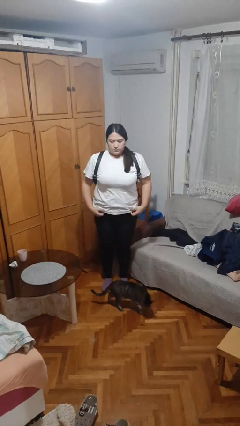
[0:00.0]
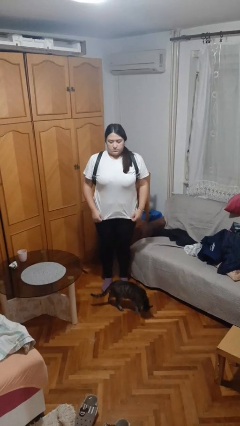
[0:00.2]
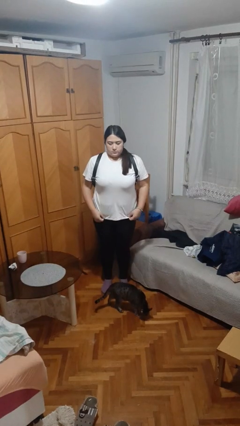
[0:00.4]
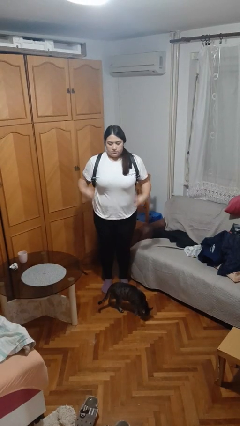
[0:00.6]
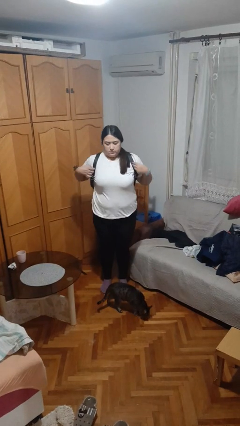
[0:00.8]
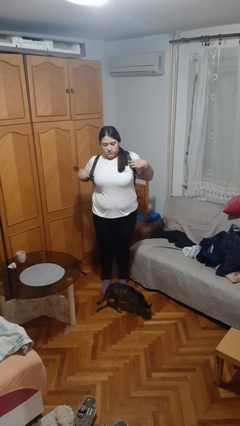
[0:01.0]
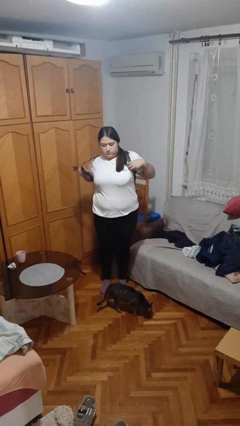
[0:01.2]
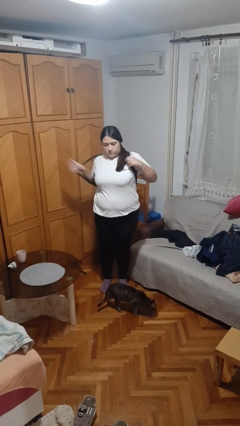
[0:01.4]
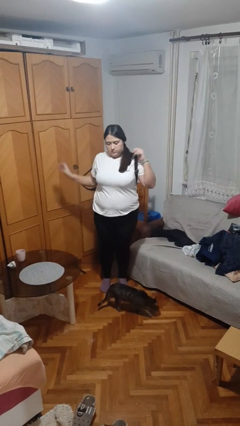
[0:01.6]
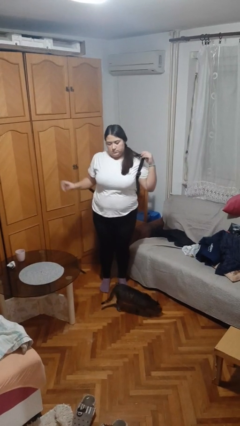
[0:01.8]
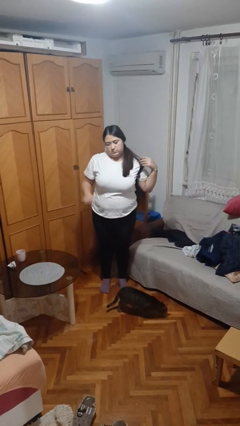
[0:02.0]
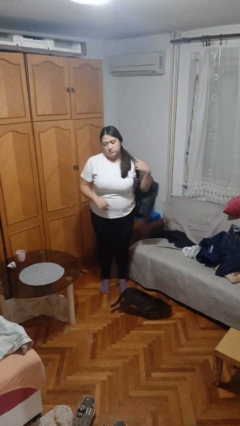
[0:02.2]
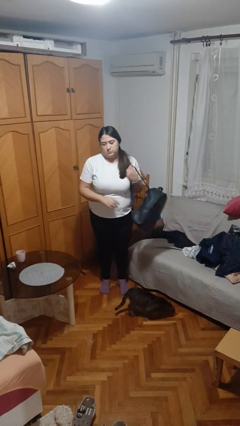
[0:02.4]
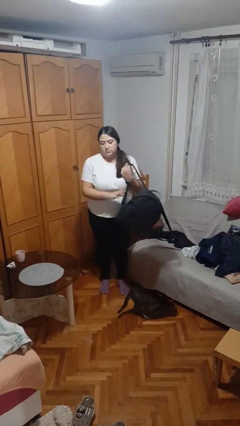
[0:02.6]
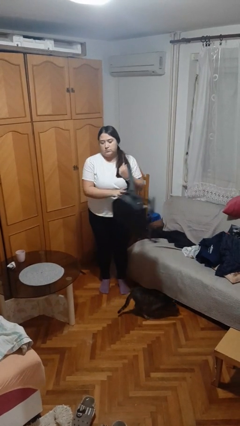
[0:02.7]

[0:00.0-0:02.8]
person takes off backpack

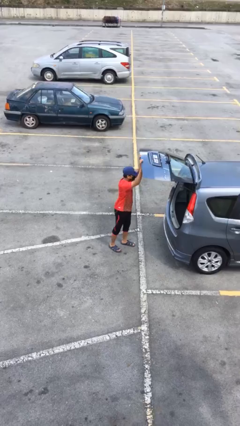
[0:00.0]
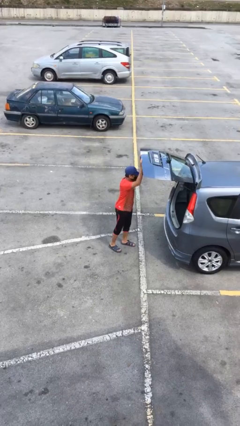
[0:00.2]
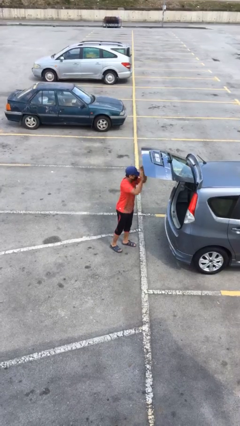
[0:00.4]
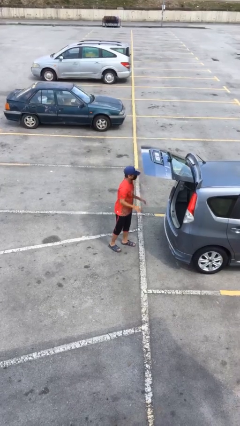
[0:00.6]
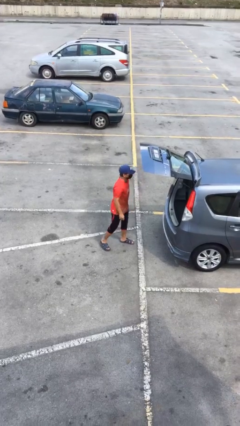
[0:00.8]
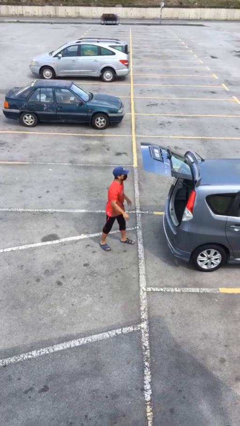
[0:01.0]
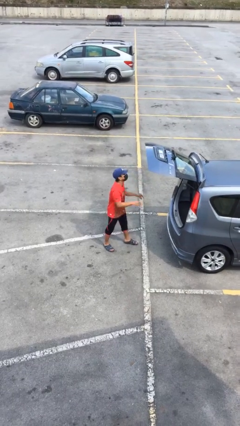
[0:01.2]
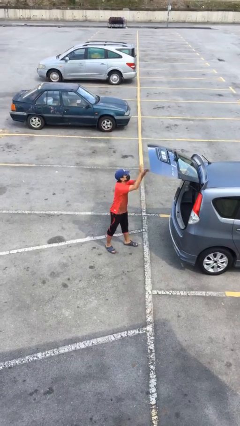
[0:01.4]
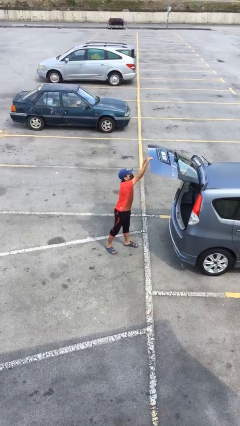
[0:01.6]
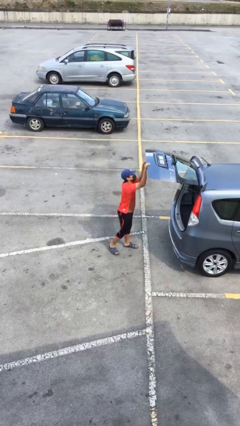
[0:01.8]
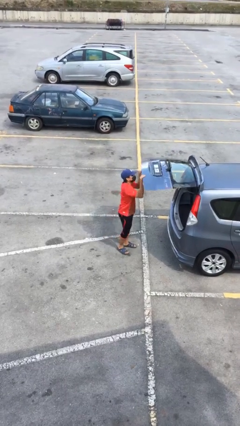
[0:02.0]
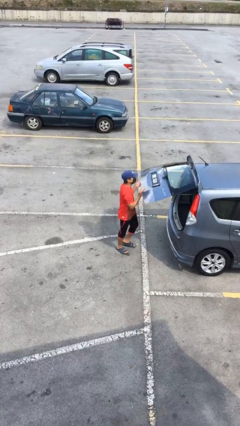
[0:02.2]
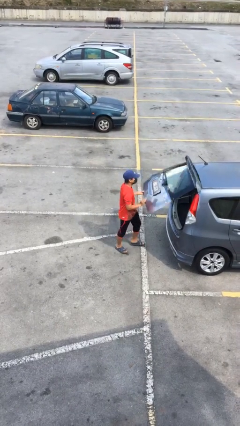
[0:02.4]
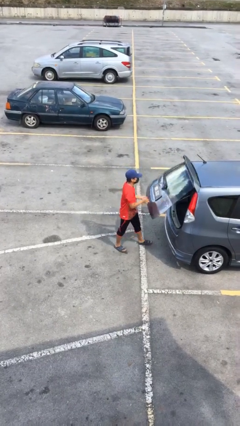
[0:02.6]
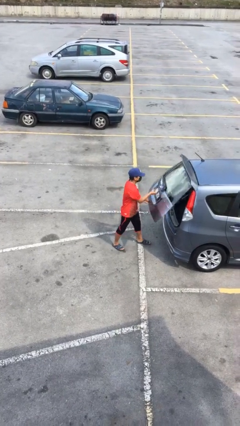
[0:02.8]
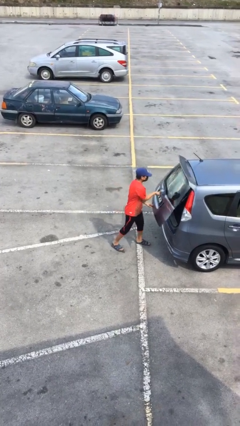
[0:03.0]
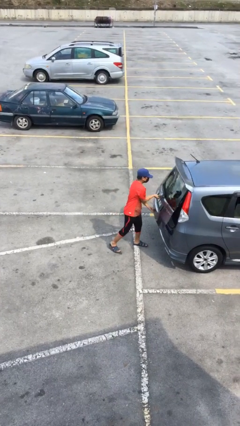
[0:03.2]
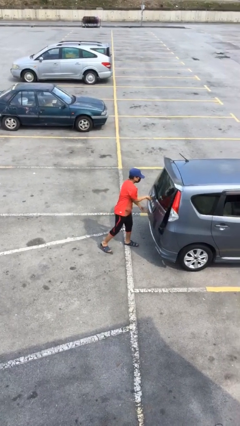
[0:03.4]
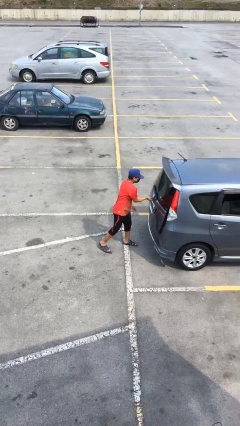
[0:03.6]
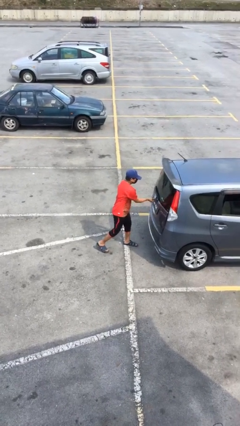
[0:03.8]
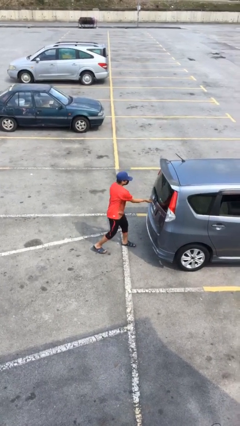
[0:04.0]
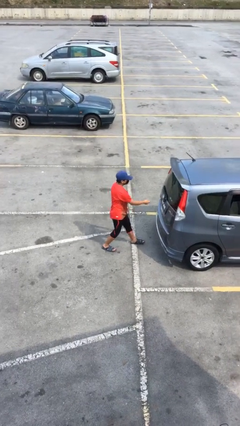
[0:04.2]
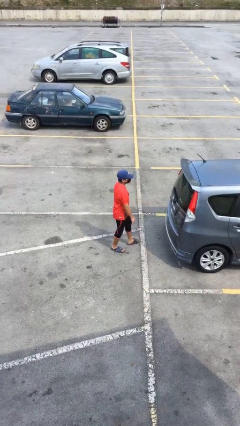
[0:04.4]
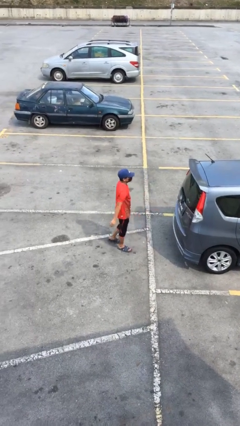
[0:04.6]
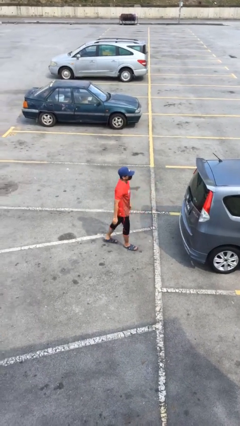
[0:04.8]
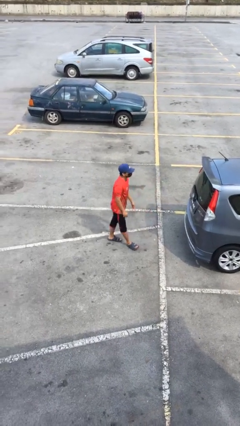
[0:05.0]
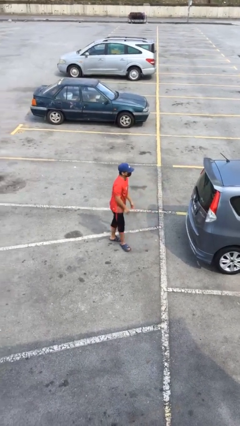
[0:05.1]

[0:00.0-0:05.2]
person closes car trunk

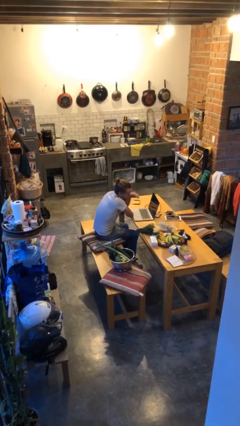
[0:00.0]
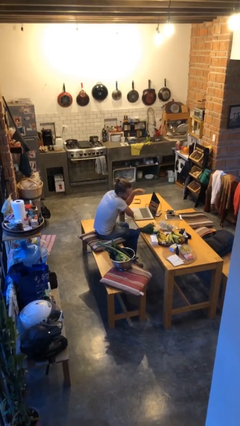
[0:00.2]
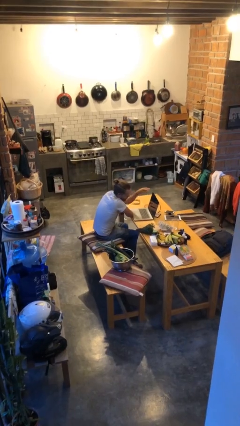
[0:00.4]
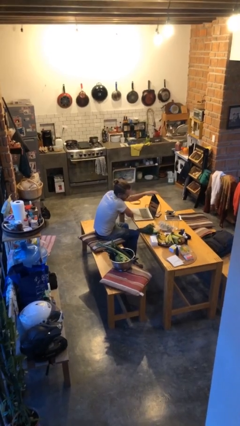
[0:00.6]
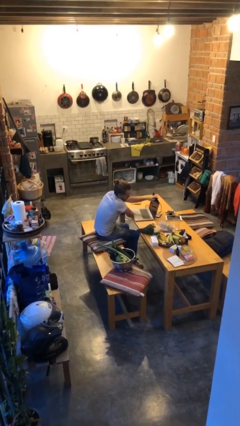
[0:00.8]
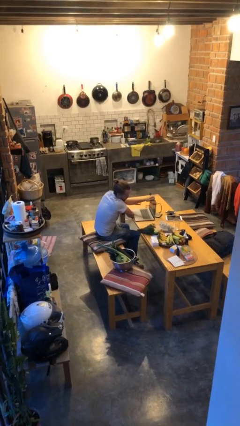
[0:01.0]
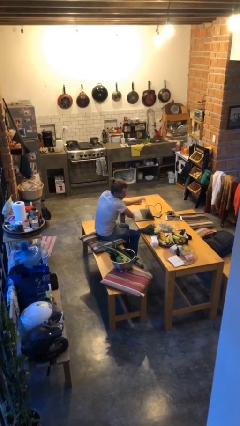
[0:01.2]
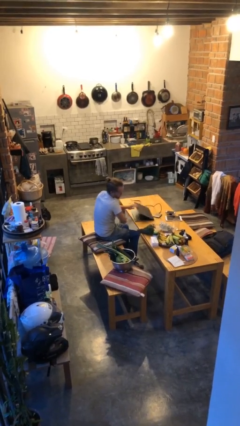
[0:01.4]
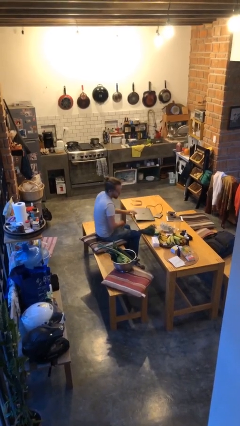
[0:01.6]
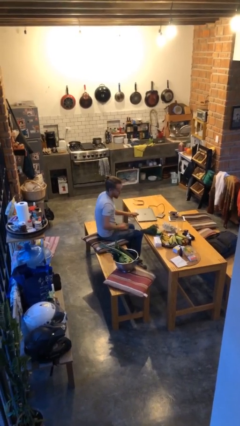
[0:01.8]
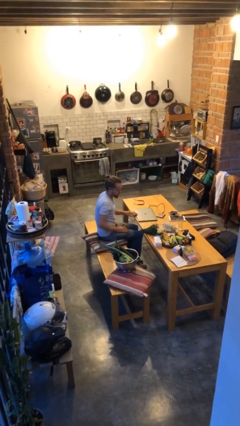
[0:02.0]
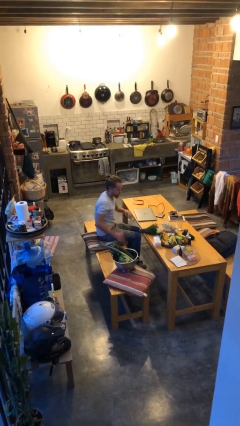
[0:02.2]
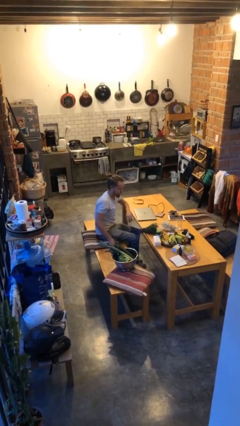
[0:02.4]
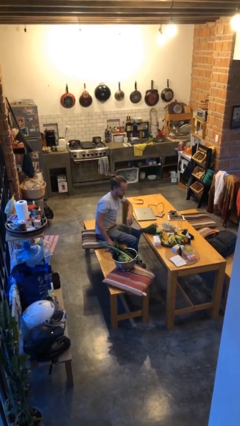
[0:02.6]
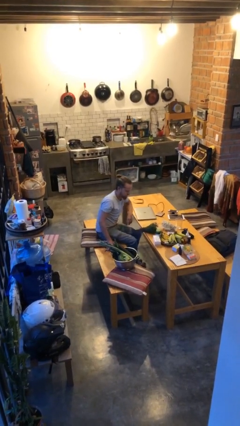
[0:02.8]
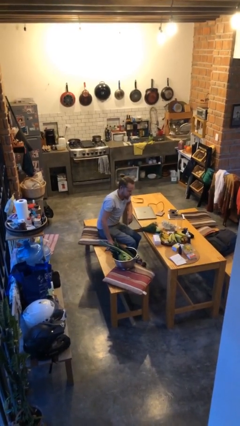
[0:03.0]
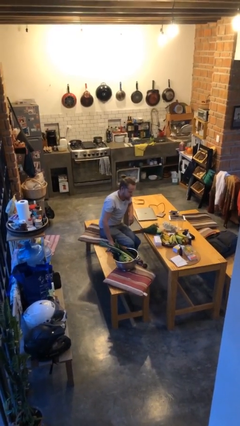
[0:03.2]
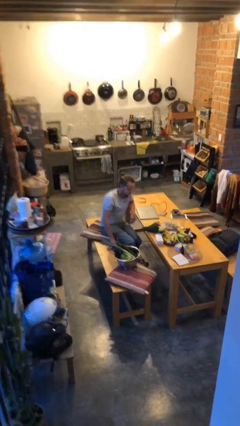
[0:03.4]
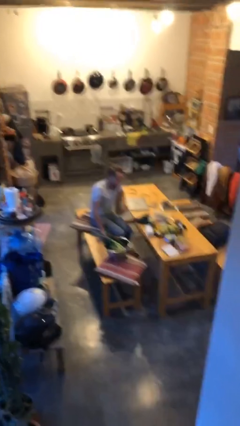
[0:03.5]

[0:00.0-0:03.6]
person closes laptop

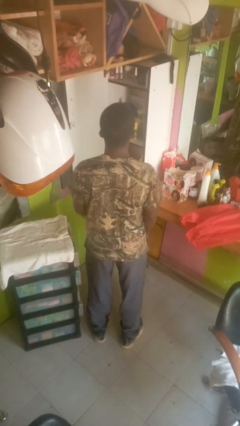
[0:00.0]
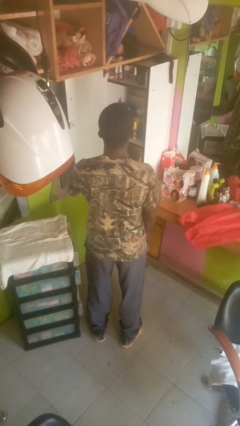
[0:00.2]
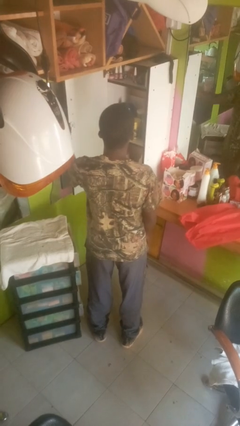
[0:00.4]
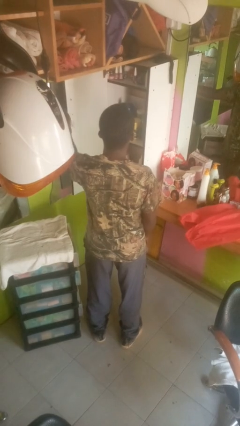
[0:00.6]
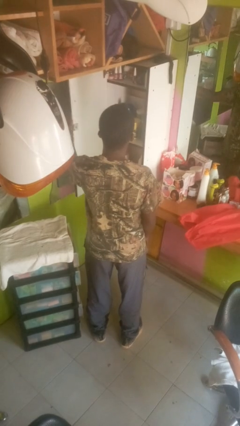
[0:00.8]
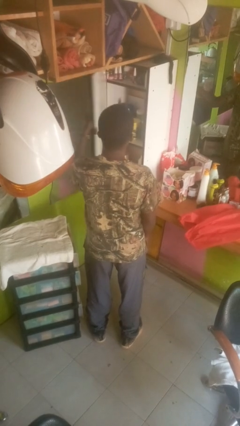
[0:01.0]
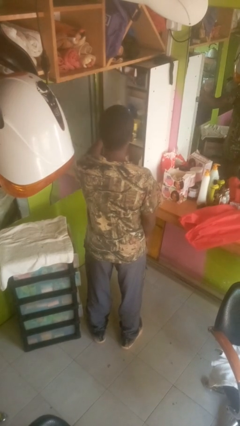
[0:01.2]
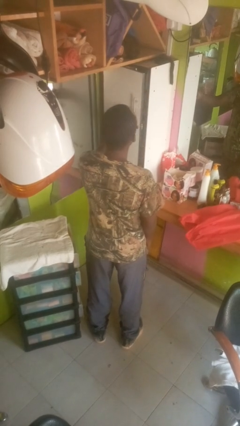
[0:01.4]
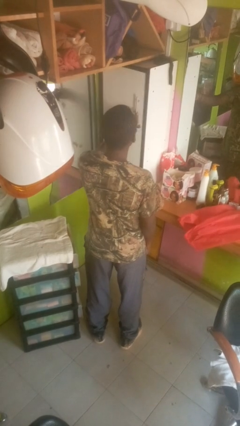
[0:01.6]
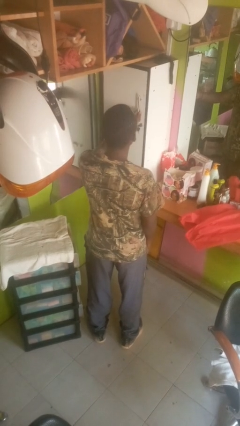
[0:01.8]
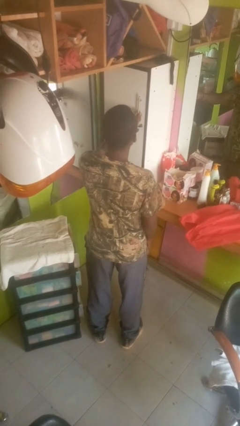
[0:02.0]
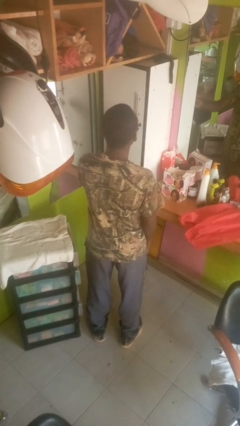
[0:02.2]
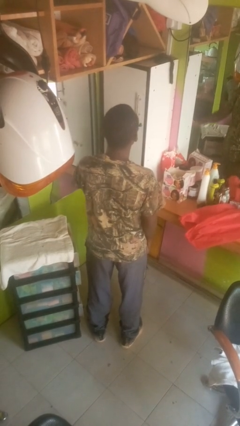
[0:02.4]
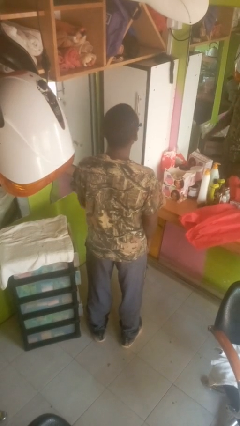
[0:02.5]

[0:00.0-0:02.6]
person closes closet door

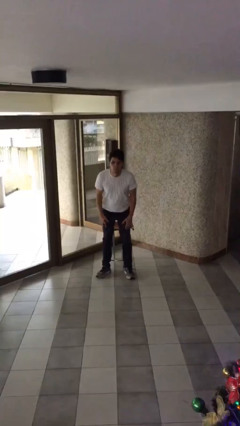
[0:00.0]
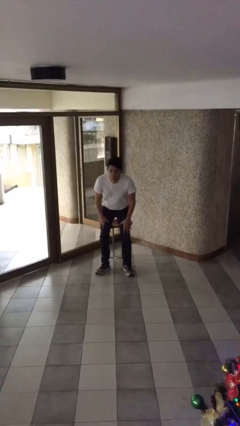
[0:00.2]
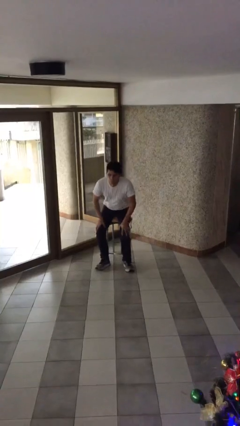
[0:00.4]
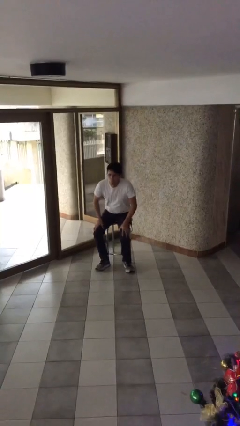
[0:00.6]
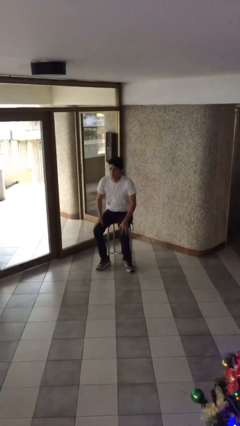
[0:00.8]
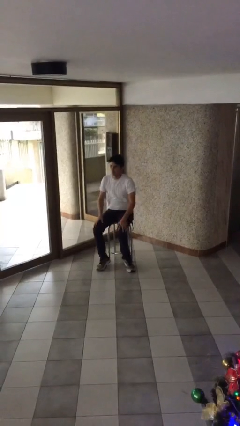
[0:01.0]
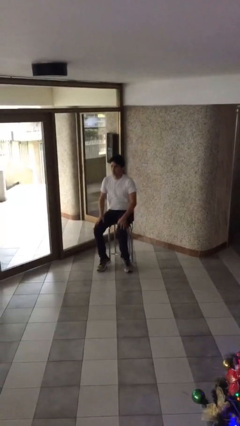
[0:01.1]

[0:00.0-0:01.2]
person sits down

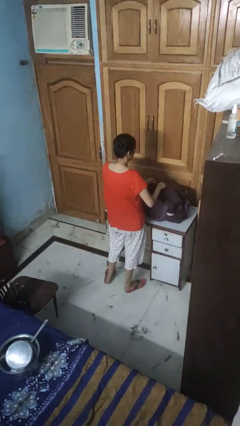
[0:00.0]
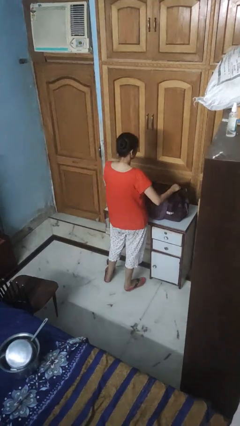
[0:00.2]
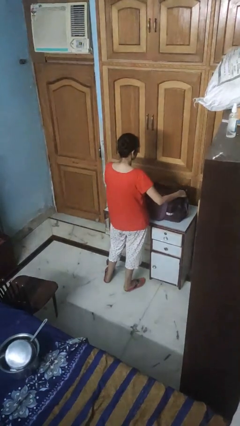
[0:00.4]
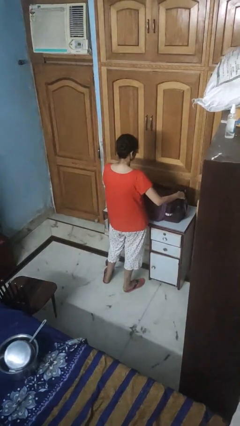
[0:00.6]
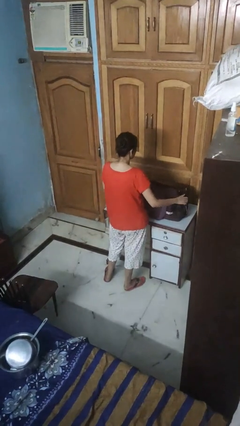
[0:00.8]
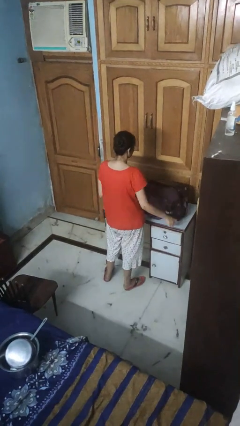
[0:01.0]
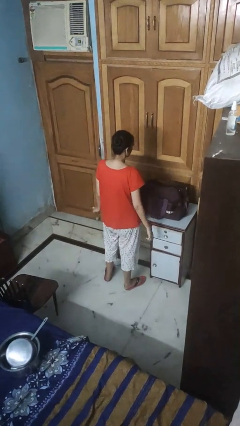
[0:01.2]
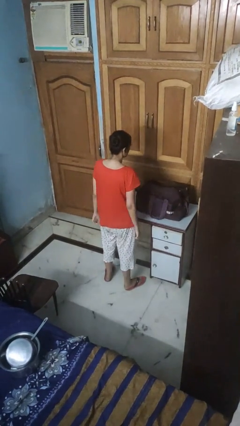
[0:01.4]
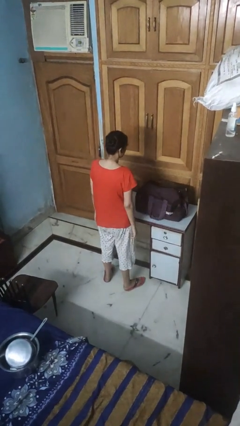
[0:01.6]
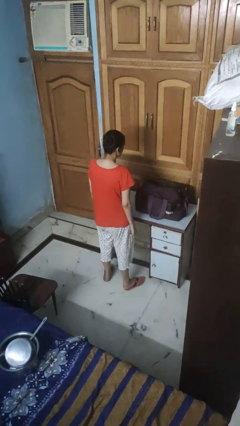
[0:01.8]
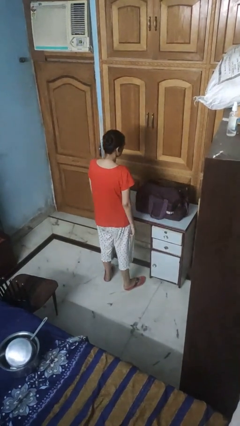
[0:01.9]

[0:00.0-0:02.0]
person opens suitcase

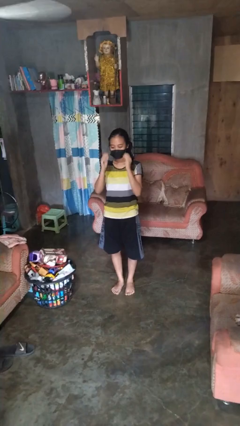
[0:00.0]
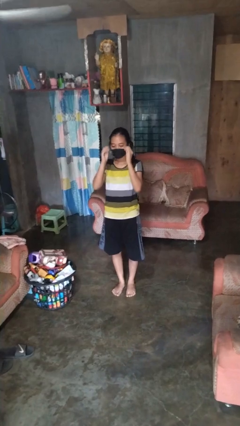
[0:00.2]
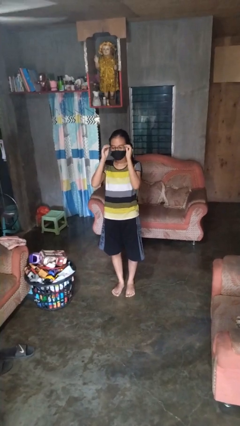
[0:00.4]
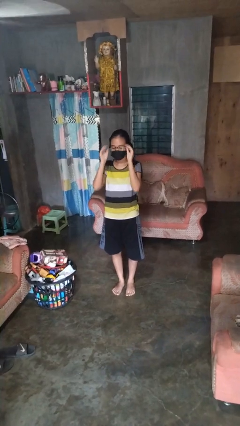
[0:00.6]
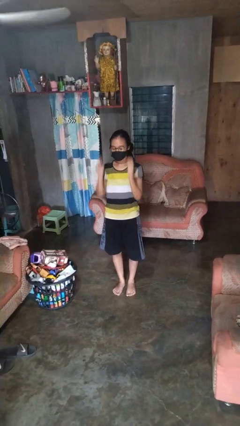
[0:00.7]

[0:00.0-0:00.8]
person puts on glasses
